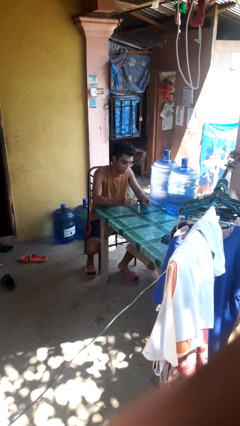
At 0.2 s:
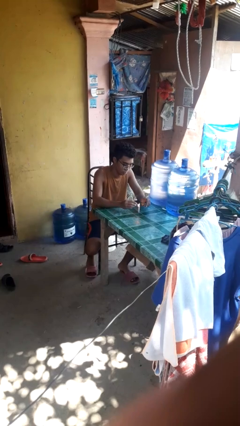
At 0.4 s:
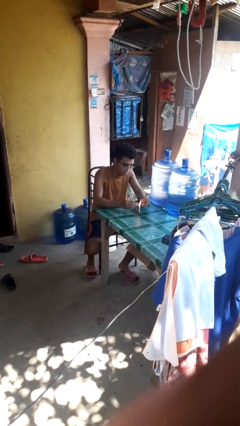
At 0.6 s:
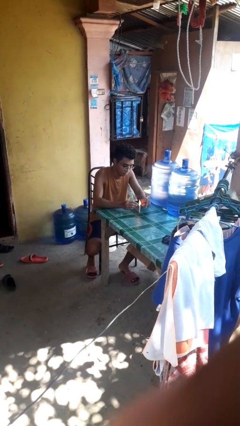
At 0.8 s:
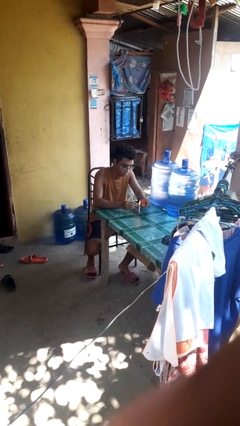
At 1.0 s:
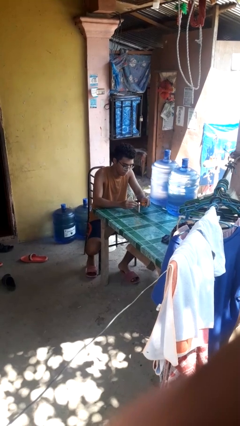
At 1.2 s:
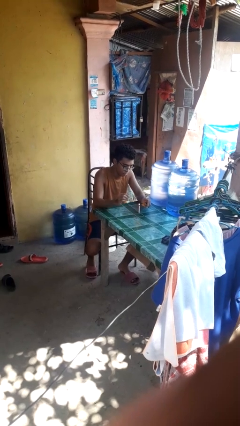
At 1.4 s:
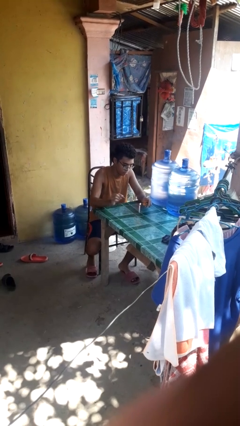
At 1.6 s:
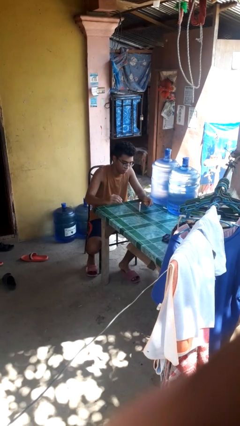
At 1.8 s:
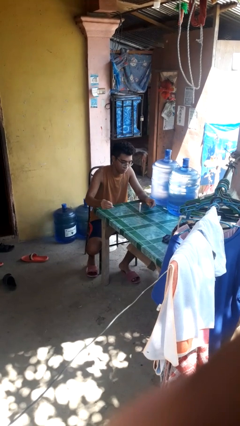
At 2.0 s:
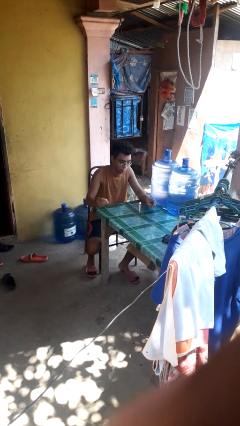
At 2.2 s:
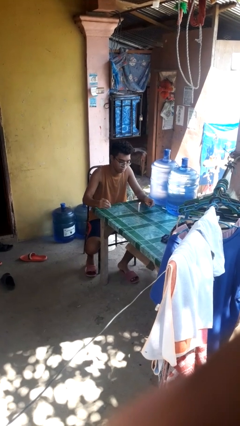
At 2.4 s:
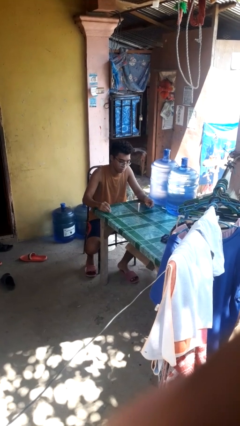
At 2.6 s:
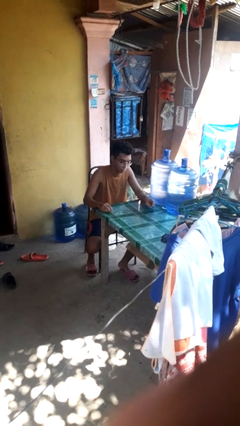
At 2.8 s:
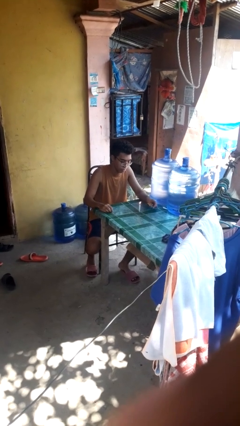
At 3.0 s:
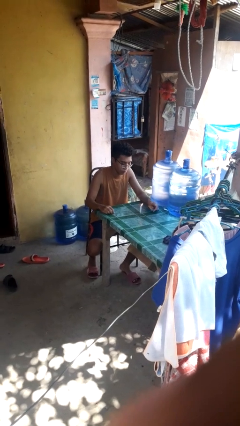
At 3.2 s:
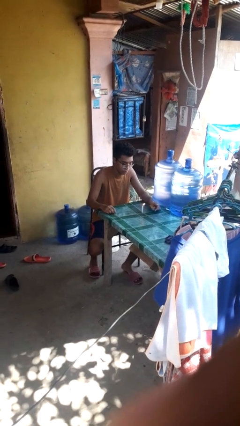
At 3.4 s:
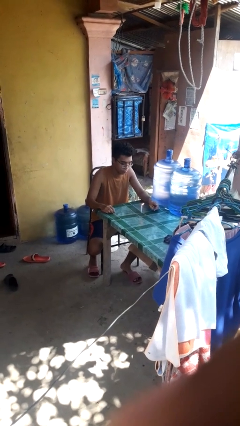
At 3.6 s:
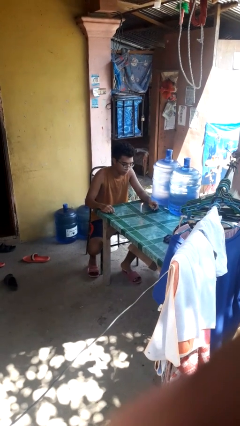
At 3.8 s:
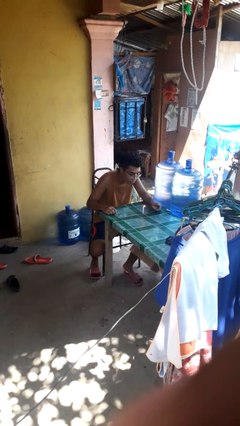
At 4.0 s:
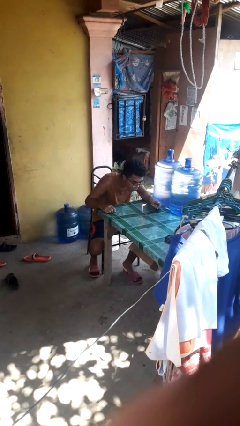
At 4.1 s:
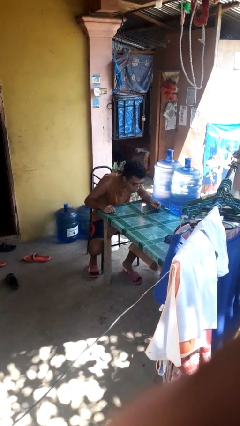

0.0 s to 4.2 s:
person lights candle

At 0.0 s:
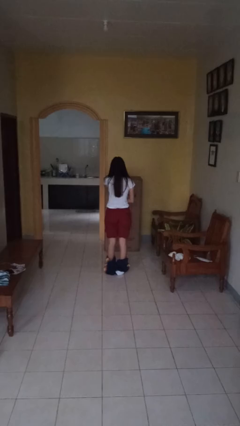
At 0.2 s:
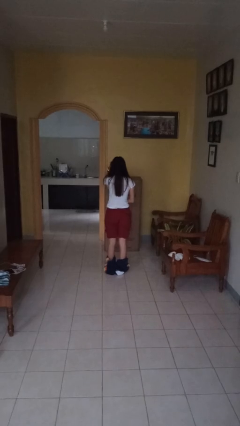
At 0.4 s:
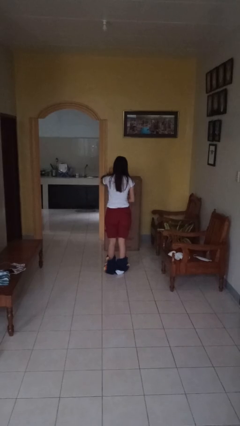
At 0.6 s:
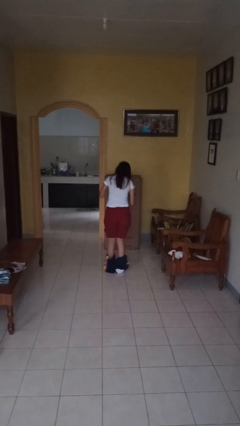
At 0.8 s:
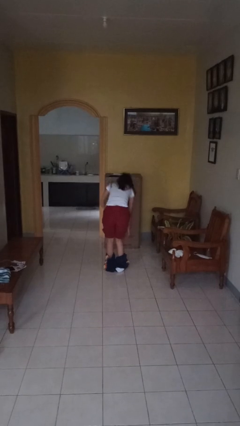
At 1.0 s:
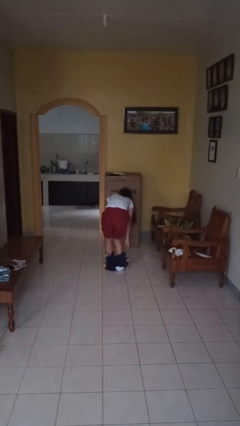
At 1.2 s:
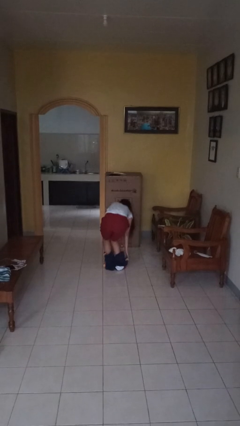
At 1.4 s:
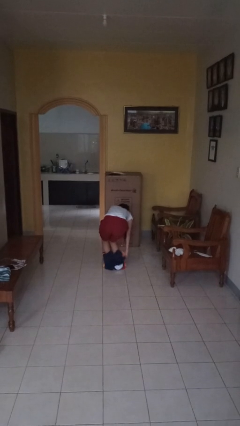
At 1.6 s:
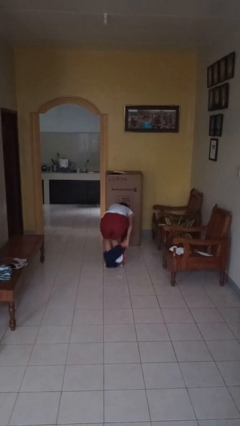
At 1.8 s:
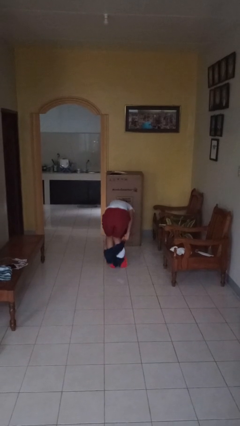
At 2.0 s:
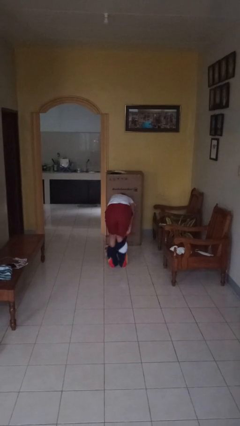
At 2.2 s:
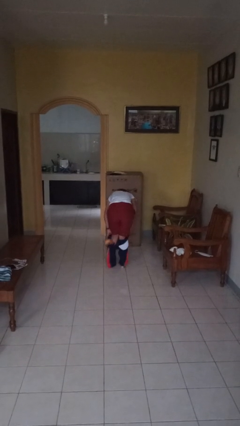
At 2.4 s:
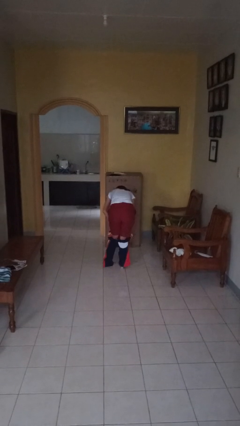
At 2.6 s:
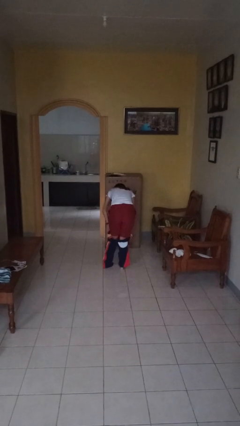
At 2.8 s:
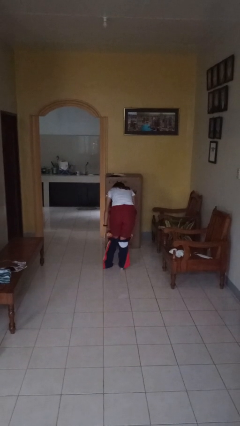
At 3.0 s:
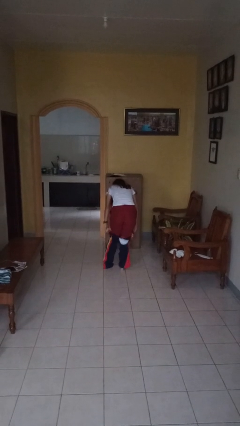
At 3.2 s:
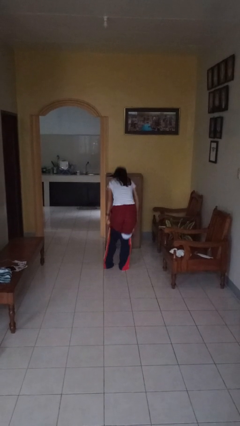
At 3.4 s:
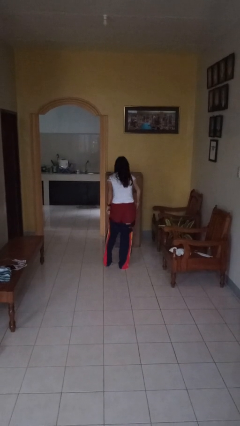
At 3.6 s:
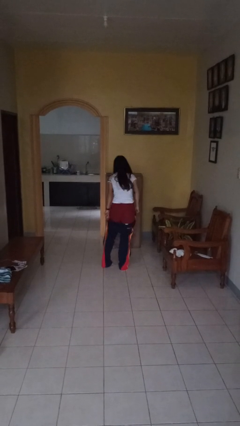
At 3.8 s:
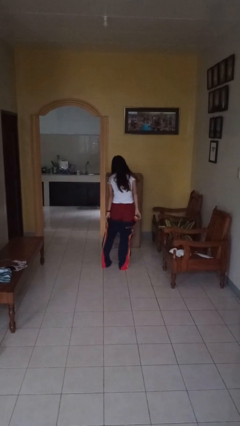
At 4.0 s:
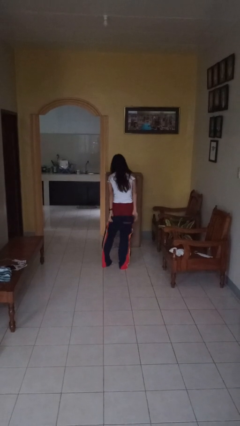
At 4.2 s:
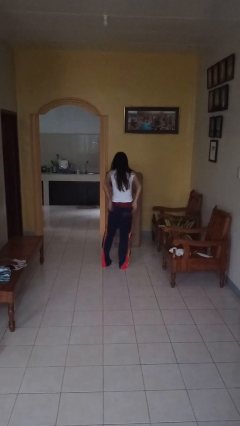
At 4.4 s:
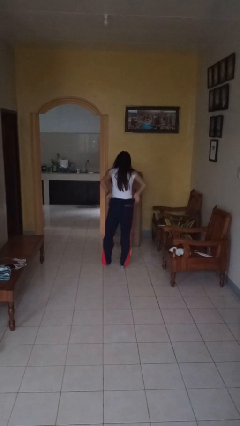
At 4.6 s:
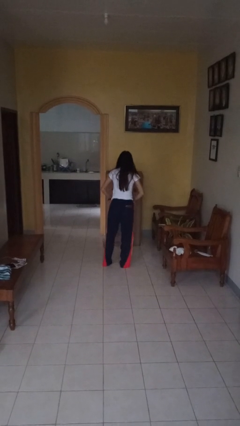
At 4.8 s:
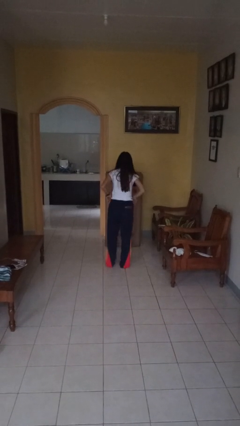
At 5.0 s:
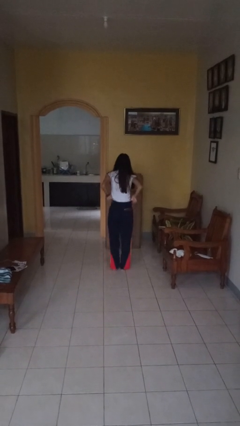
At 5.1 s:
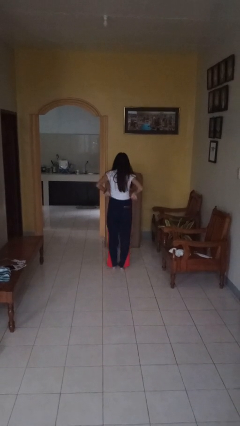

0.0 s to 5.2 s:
person puts on pants

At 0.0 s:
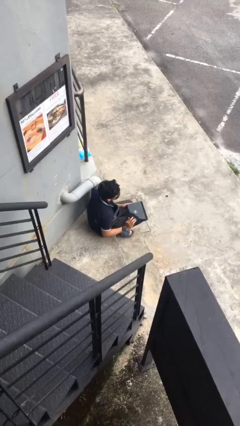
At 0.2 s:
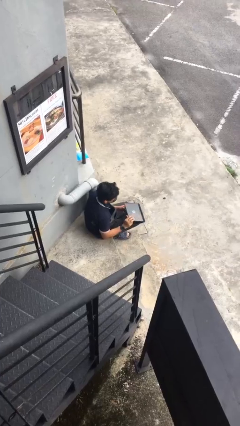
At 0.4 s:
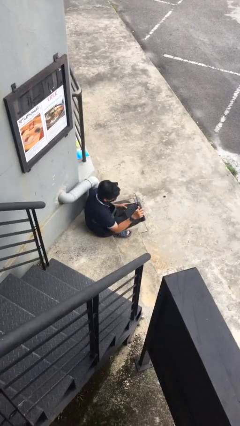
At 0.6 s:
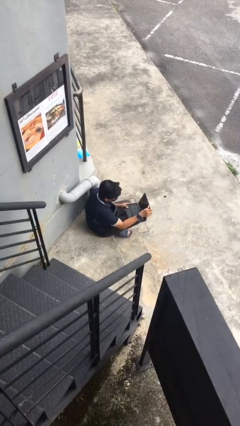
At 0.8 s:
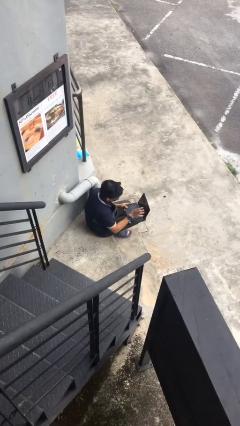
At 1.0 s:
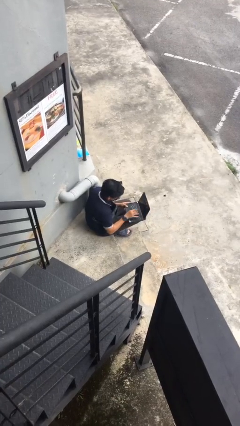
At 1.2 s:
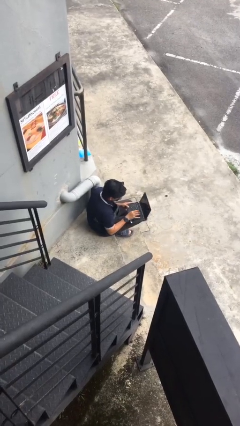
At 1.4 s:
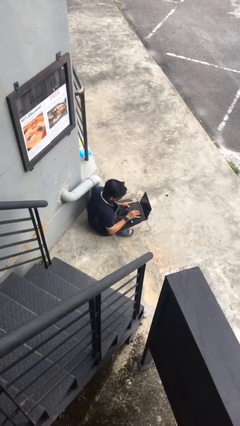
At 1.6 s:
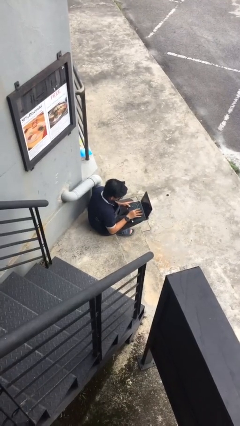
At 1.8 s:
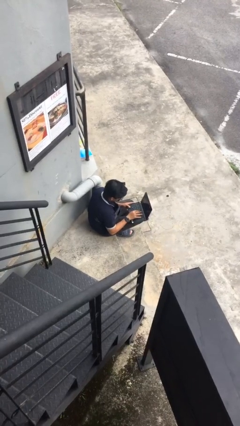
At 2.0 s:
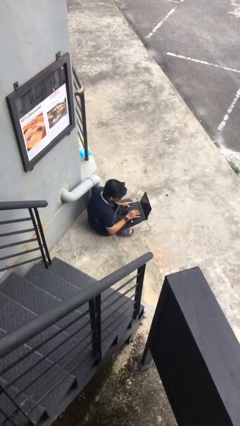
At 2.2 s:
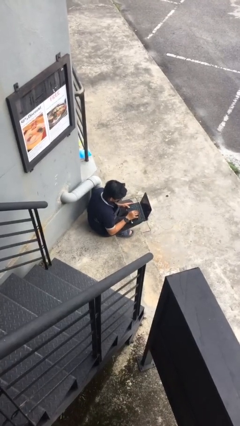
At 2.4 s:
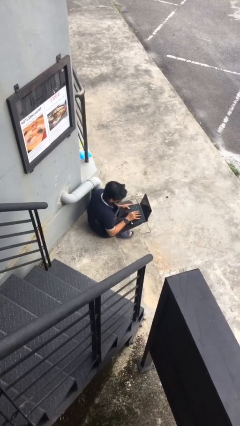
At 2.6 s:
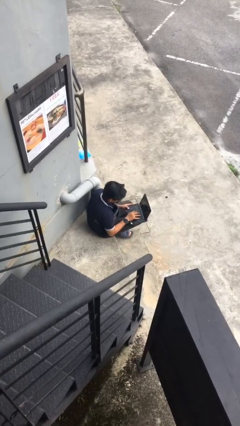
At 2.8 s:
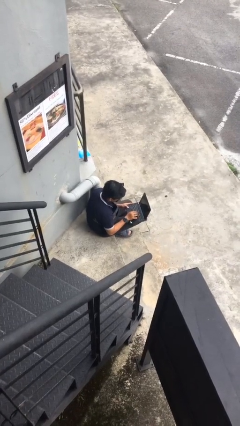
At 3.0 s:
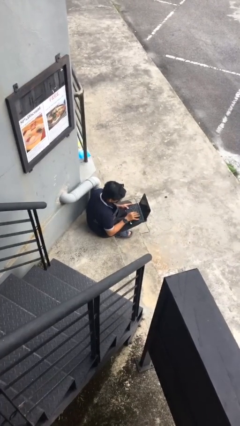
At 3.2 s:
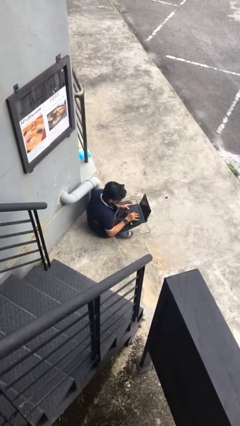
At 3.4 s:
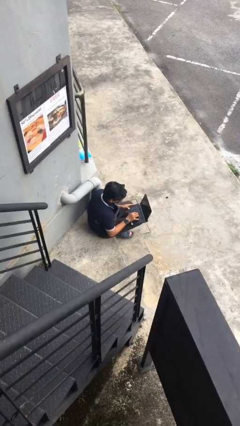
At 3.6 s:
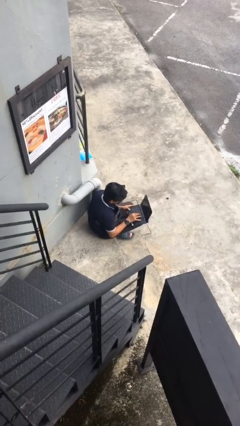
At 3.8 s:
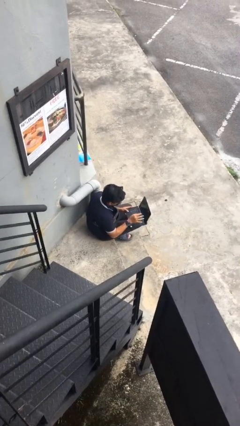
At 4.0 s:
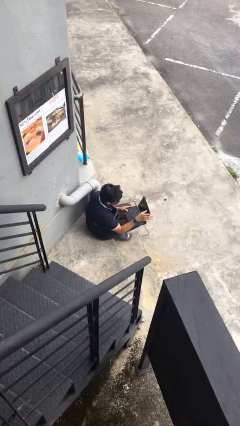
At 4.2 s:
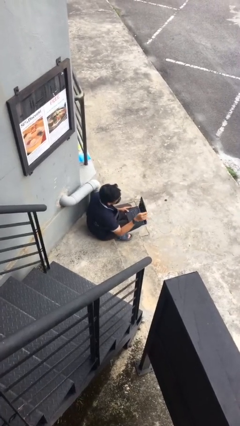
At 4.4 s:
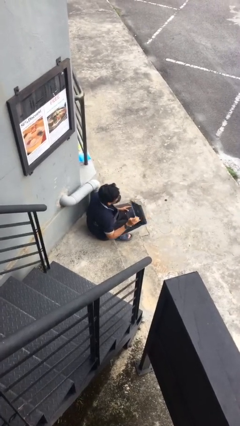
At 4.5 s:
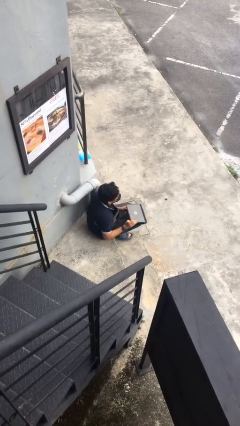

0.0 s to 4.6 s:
person interacts with laptop

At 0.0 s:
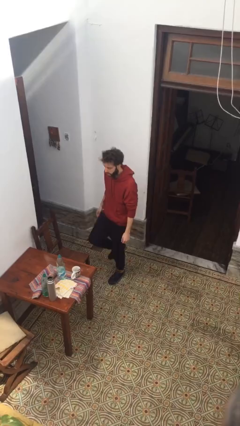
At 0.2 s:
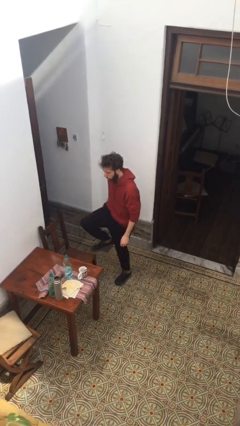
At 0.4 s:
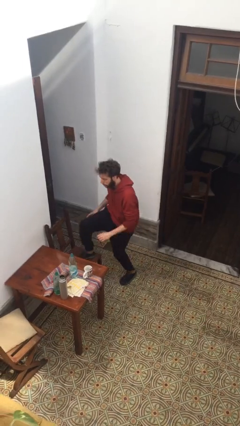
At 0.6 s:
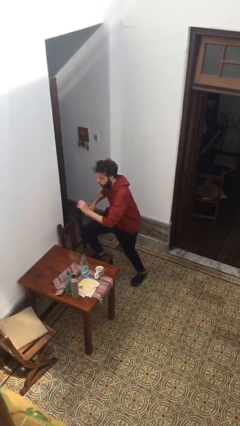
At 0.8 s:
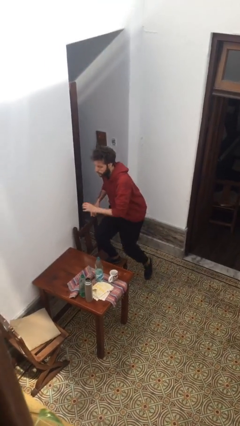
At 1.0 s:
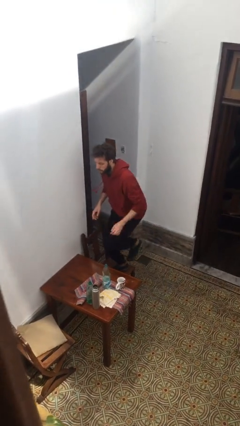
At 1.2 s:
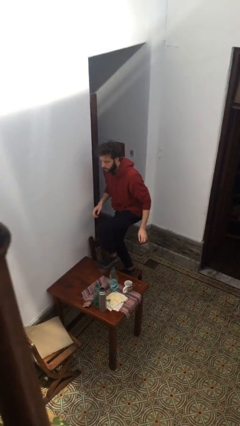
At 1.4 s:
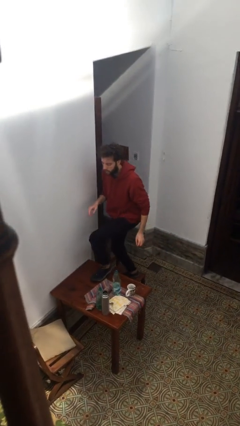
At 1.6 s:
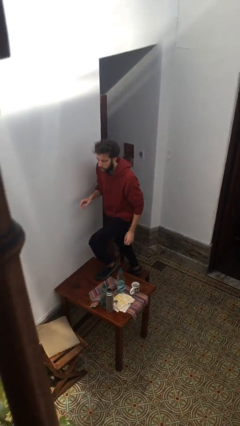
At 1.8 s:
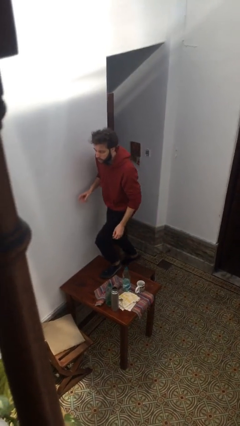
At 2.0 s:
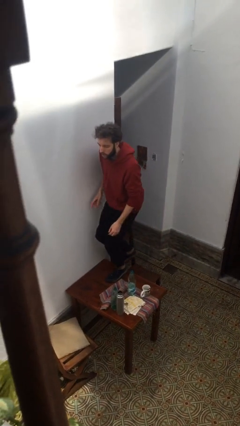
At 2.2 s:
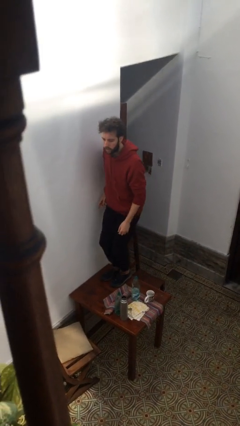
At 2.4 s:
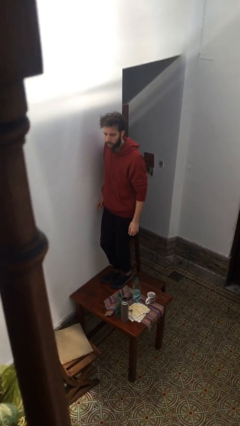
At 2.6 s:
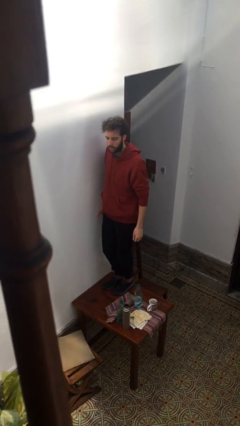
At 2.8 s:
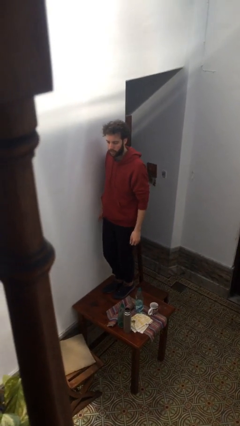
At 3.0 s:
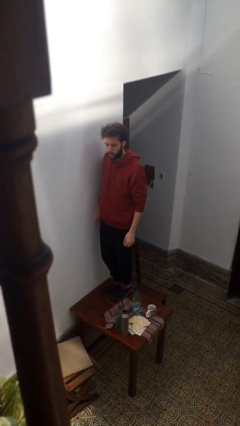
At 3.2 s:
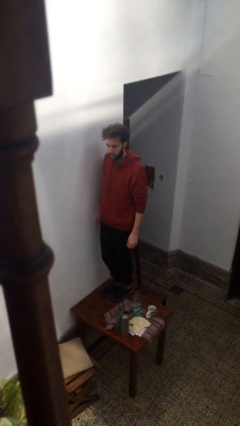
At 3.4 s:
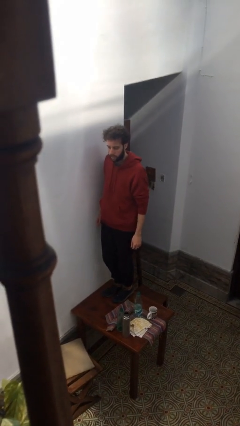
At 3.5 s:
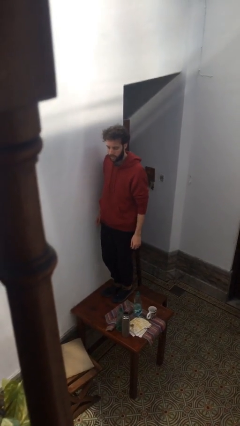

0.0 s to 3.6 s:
person climbs on table
